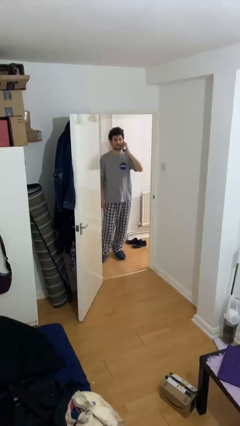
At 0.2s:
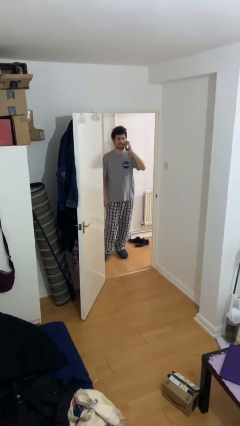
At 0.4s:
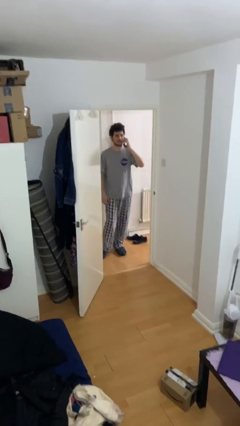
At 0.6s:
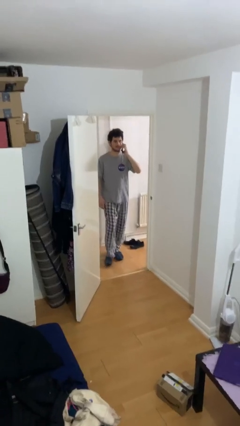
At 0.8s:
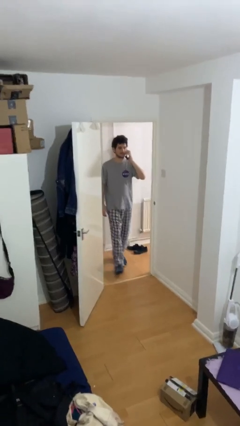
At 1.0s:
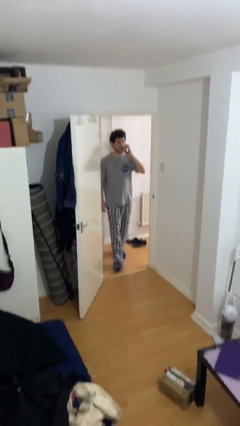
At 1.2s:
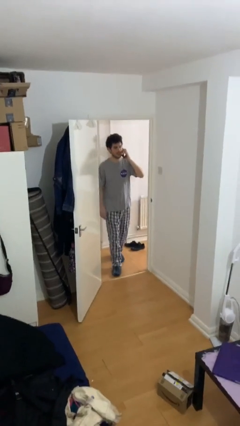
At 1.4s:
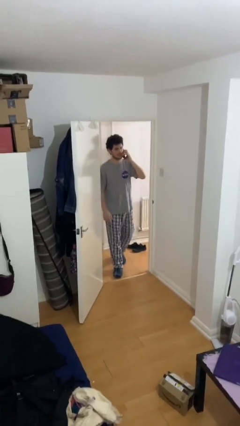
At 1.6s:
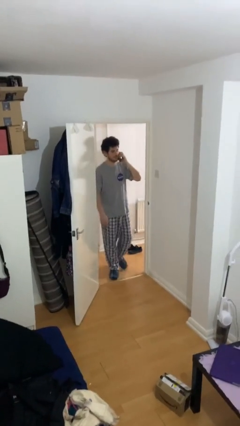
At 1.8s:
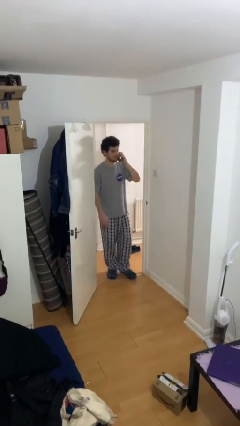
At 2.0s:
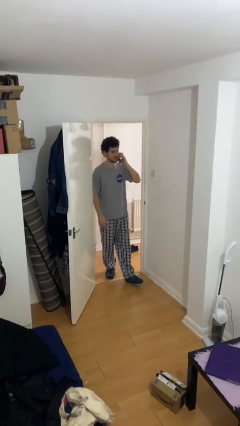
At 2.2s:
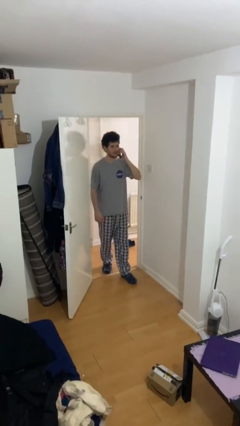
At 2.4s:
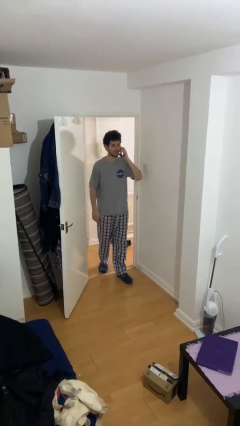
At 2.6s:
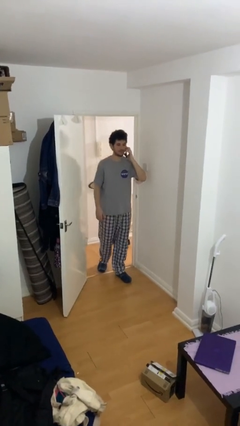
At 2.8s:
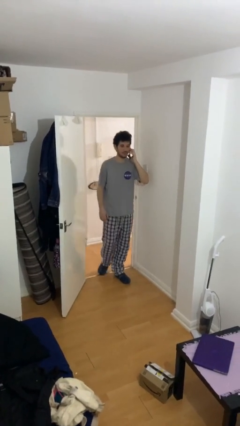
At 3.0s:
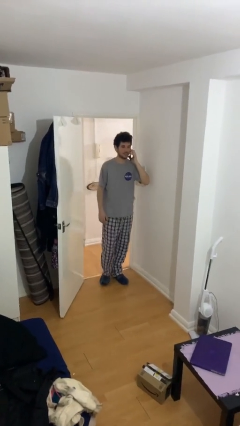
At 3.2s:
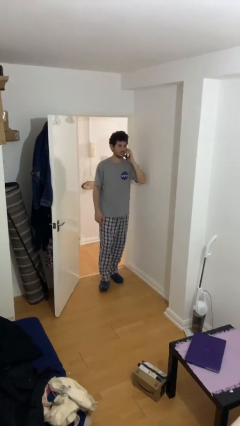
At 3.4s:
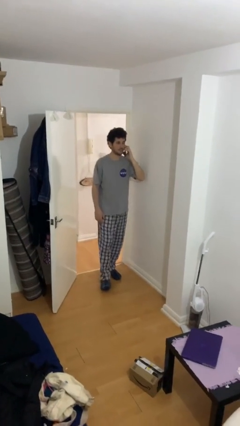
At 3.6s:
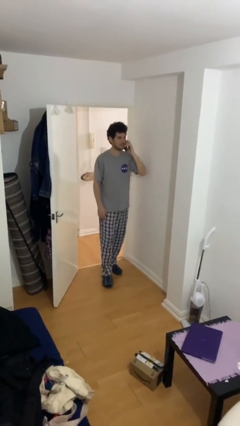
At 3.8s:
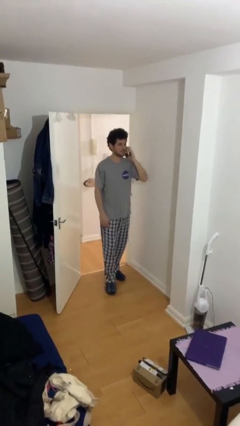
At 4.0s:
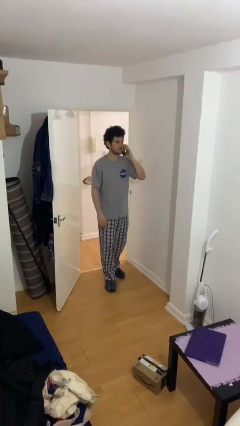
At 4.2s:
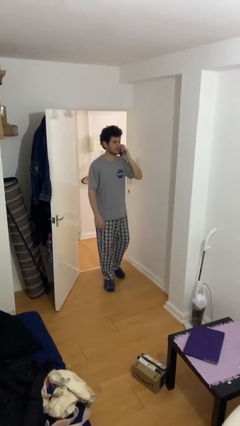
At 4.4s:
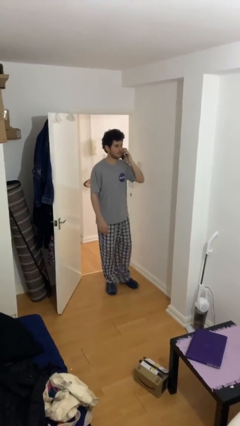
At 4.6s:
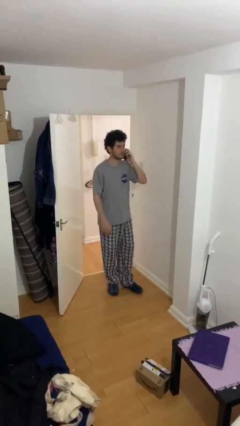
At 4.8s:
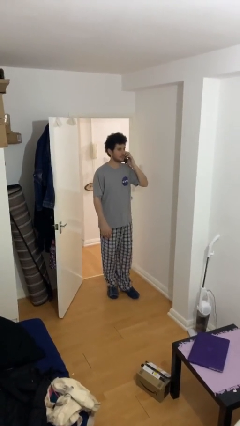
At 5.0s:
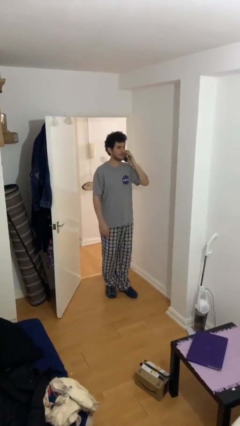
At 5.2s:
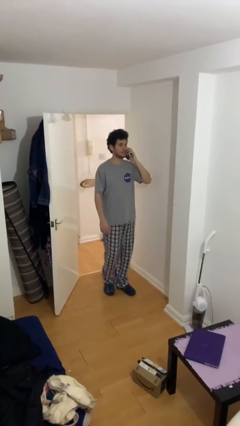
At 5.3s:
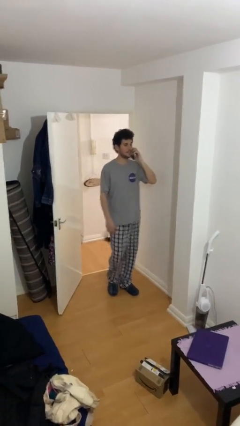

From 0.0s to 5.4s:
person enters scene through structure

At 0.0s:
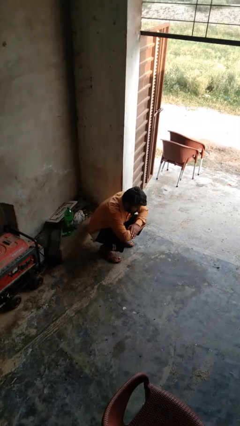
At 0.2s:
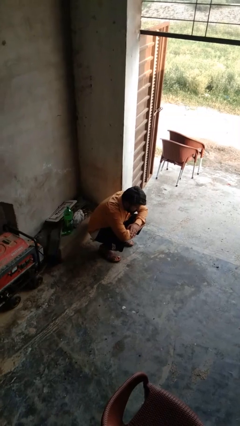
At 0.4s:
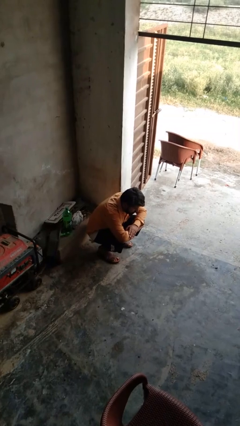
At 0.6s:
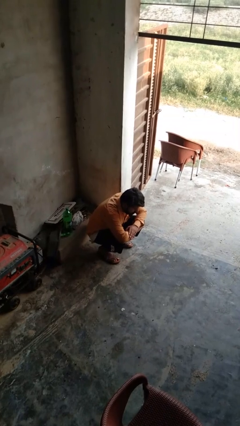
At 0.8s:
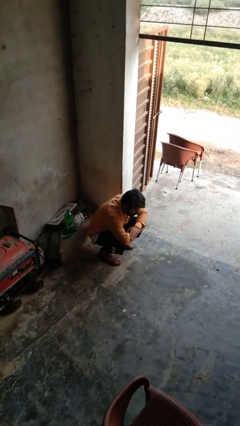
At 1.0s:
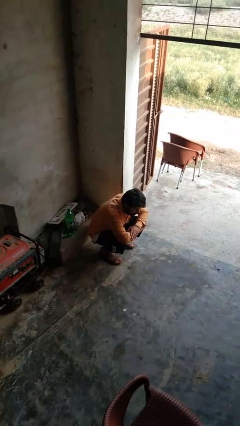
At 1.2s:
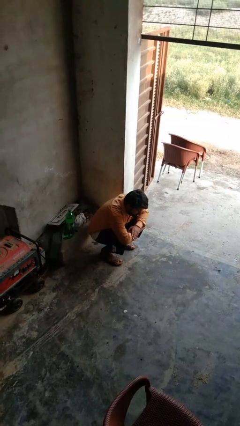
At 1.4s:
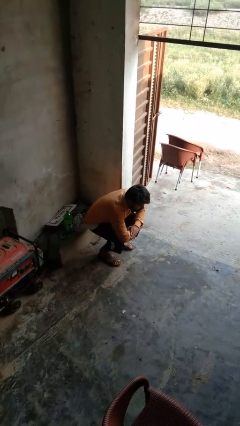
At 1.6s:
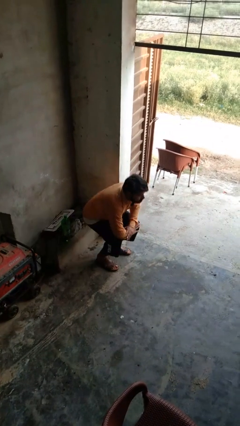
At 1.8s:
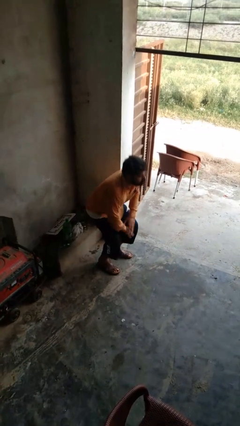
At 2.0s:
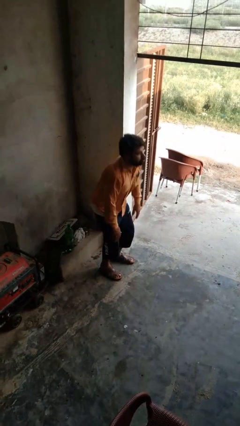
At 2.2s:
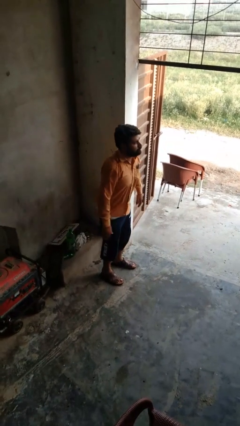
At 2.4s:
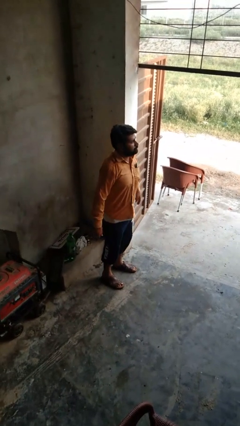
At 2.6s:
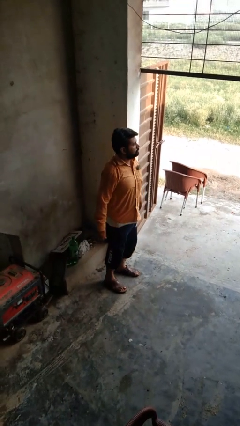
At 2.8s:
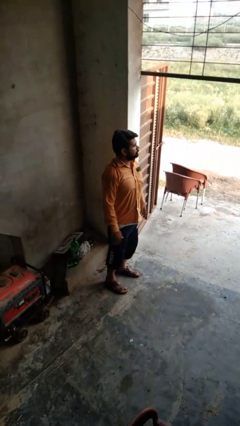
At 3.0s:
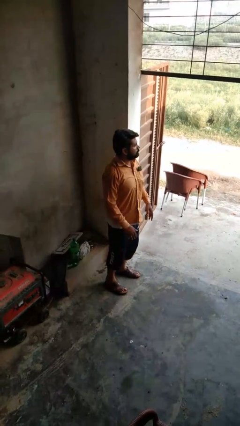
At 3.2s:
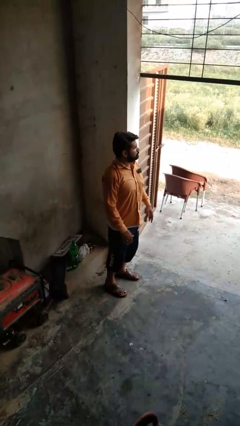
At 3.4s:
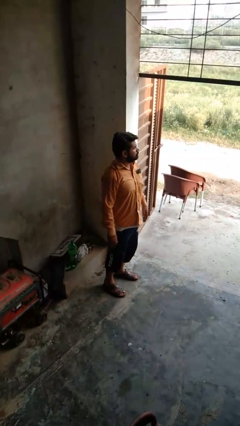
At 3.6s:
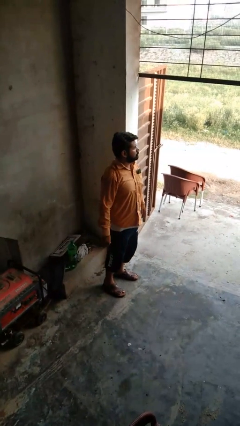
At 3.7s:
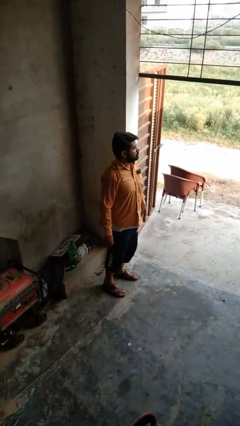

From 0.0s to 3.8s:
person stands up

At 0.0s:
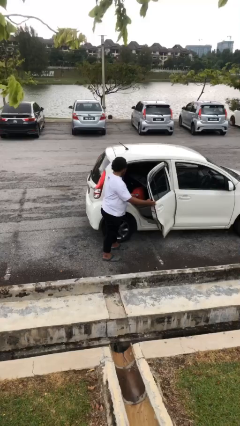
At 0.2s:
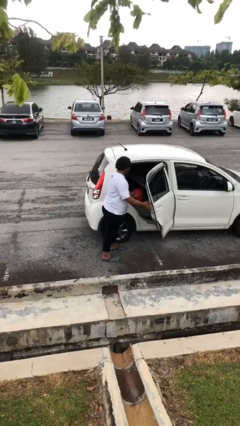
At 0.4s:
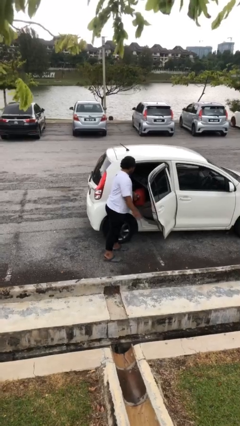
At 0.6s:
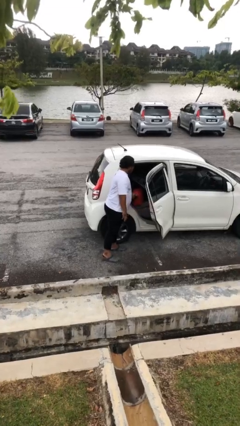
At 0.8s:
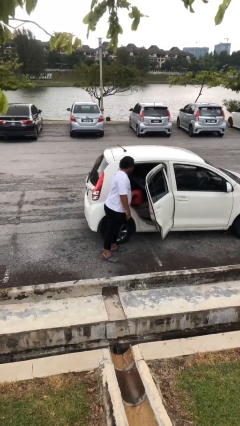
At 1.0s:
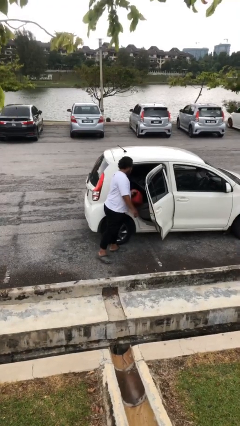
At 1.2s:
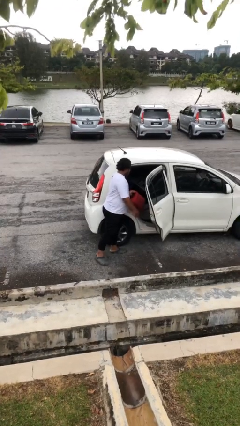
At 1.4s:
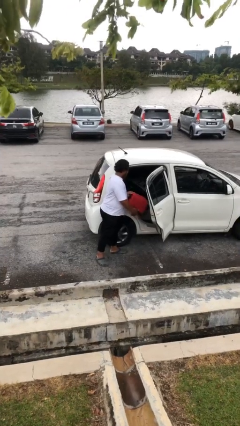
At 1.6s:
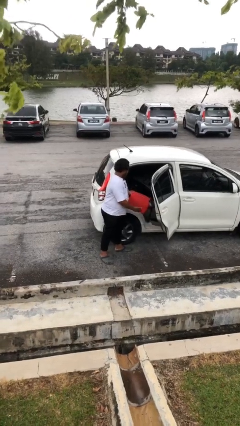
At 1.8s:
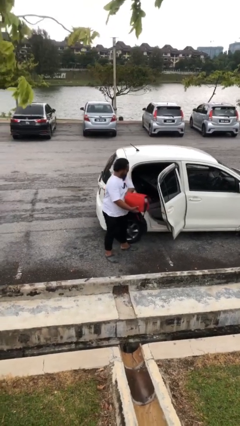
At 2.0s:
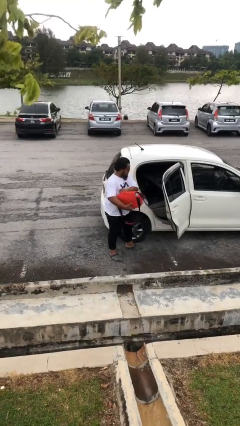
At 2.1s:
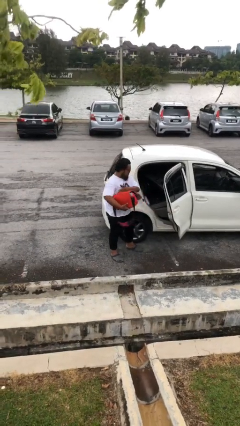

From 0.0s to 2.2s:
person unloads car

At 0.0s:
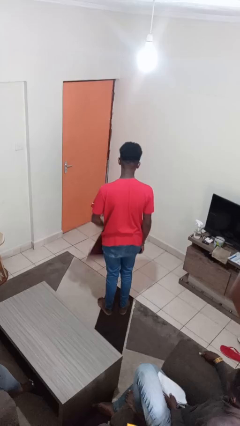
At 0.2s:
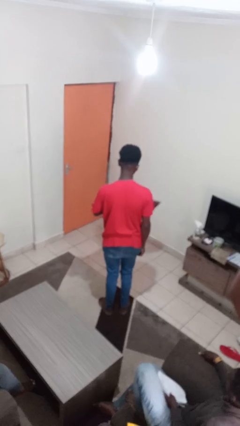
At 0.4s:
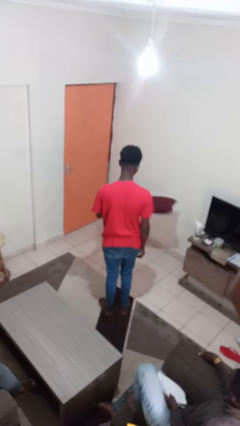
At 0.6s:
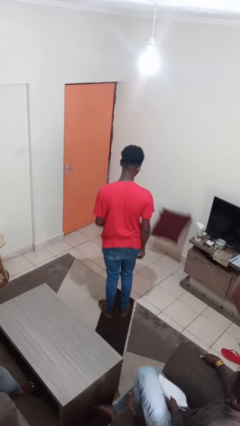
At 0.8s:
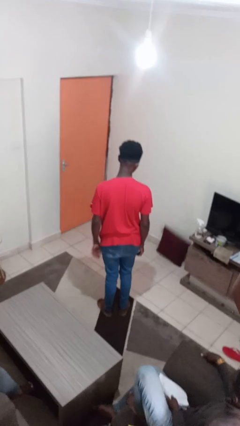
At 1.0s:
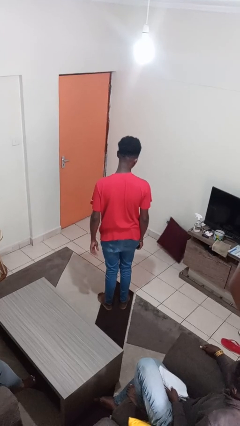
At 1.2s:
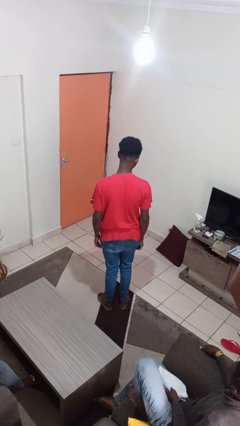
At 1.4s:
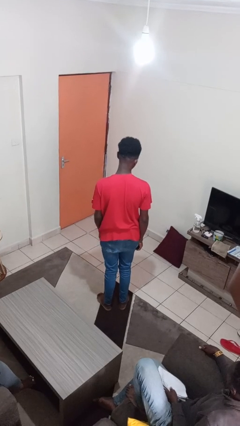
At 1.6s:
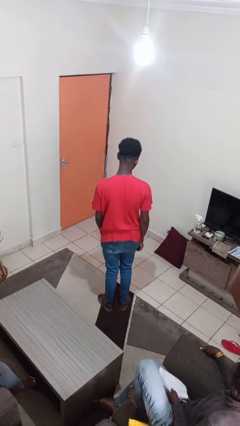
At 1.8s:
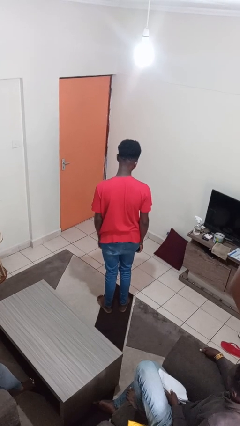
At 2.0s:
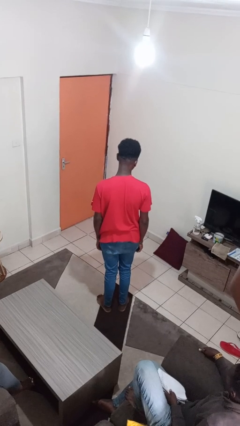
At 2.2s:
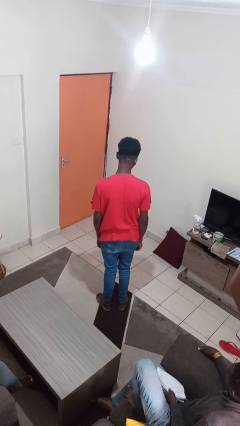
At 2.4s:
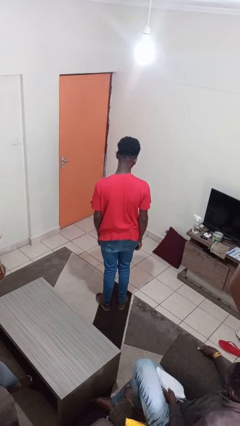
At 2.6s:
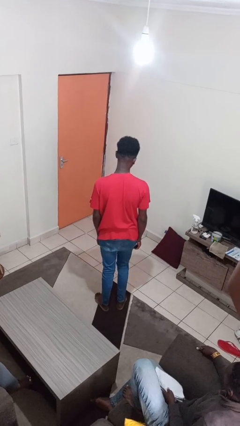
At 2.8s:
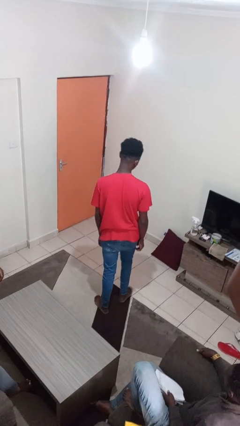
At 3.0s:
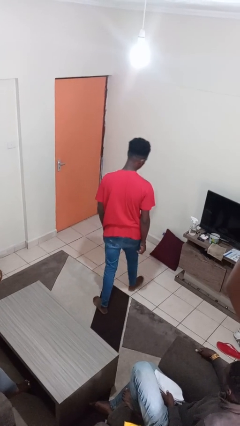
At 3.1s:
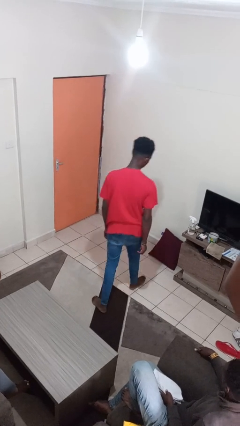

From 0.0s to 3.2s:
person throws object to ground

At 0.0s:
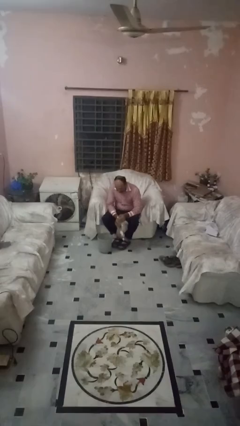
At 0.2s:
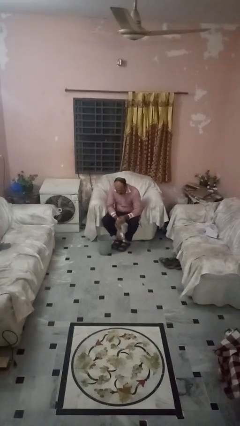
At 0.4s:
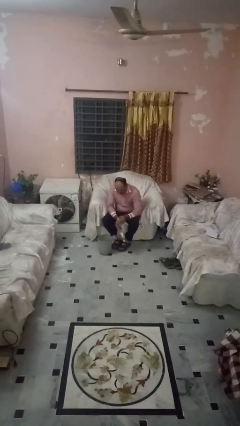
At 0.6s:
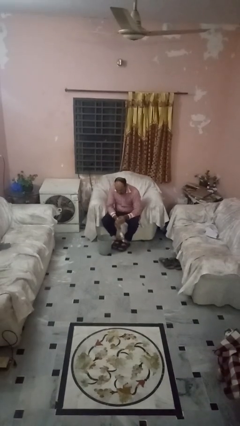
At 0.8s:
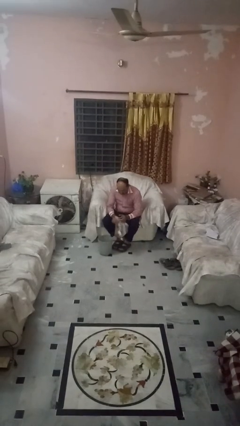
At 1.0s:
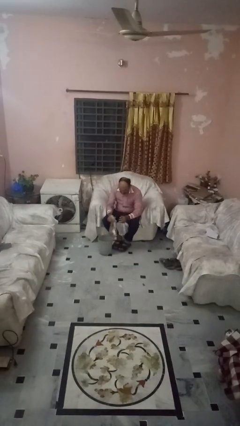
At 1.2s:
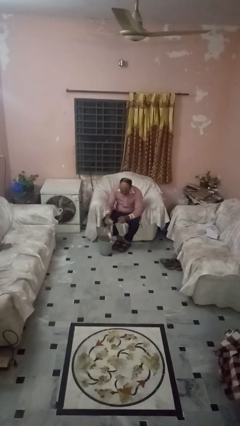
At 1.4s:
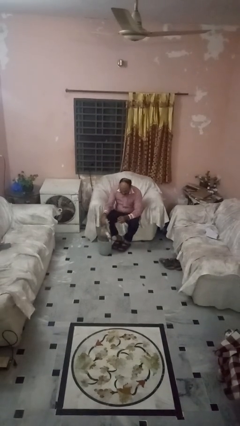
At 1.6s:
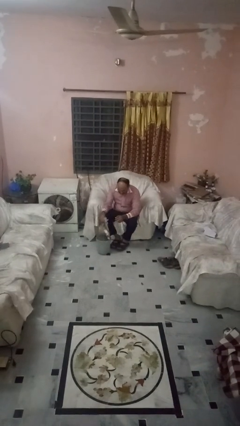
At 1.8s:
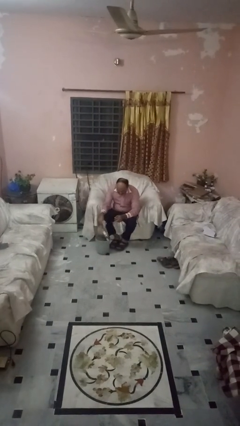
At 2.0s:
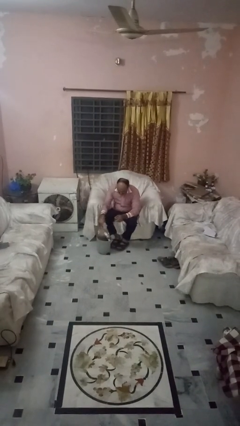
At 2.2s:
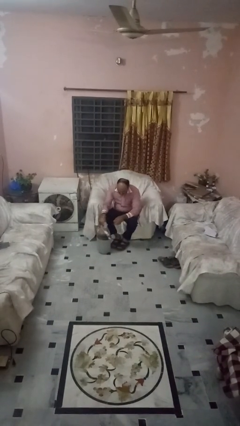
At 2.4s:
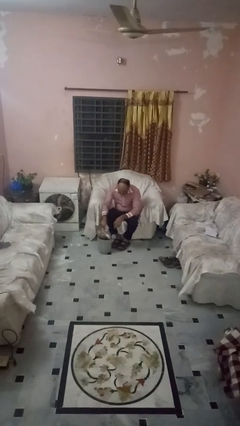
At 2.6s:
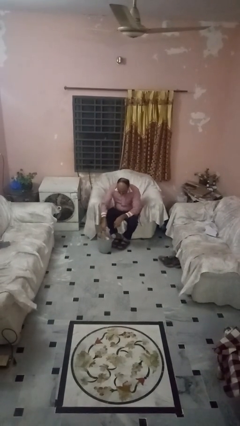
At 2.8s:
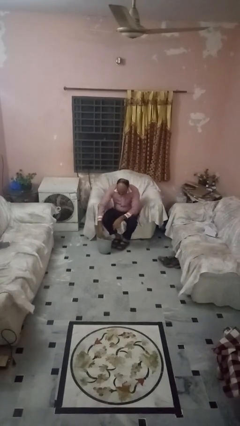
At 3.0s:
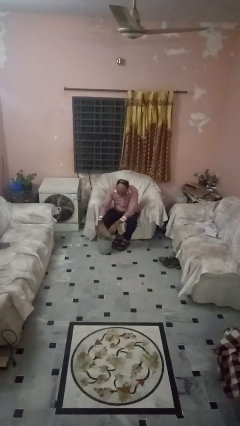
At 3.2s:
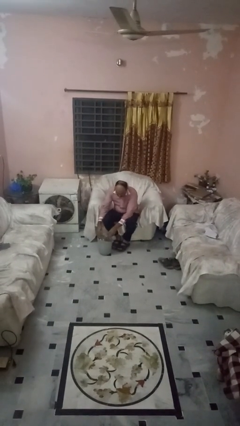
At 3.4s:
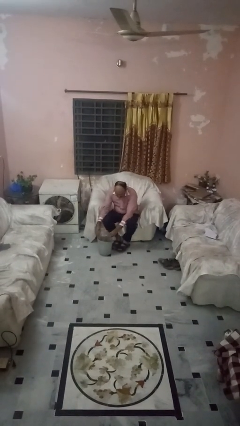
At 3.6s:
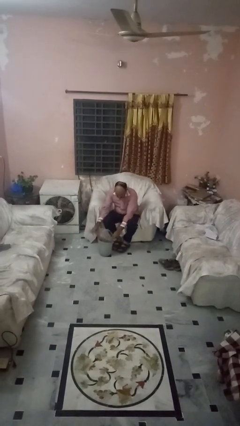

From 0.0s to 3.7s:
person inserts trashbag into trashcan
